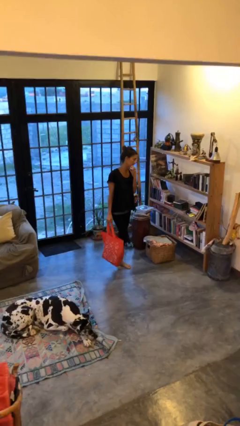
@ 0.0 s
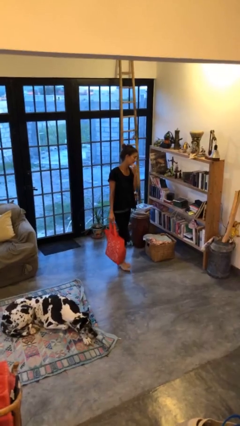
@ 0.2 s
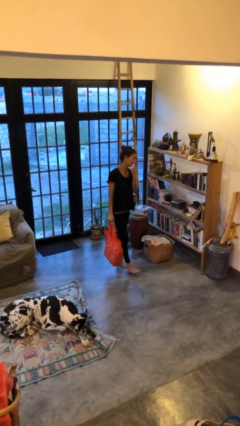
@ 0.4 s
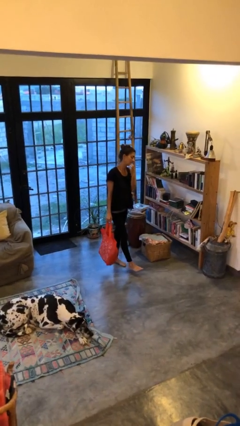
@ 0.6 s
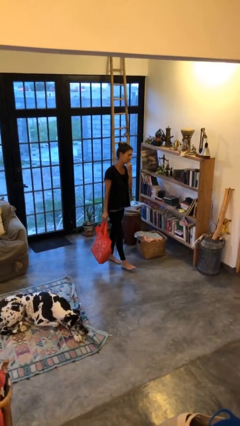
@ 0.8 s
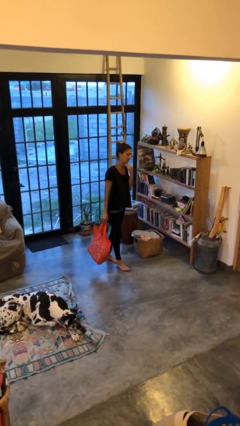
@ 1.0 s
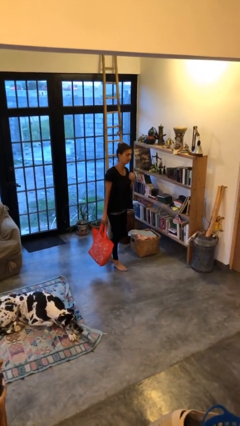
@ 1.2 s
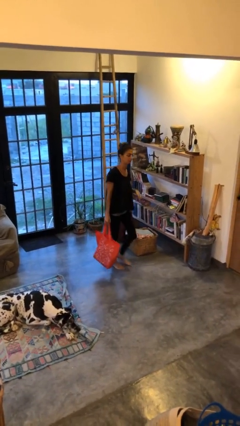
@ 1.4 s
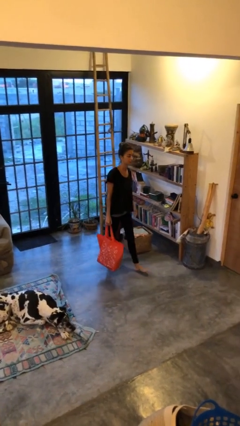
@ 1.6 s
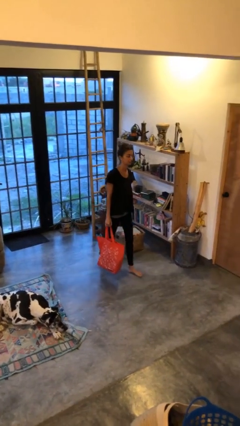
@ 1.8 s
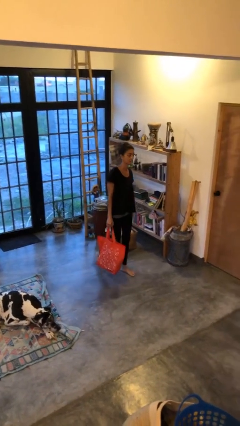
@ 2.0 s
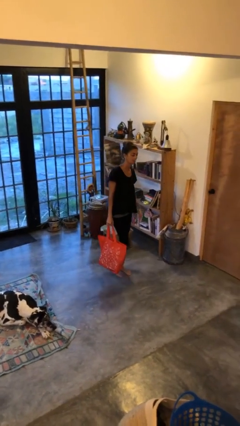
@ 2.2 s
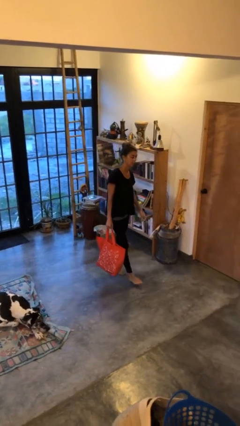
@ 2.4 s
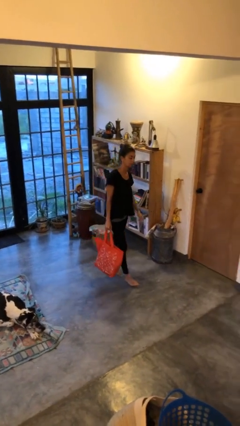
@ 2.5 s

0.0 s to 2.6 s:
person carries groceries

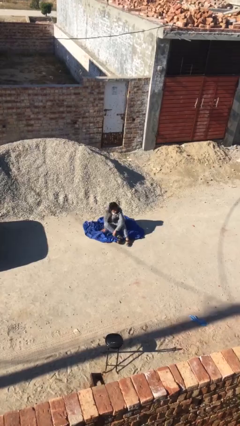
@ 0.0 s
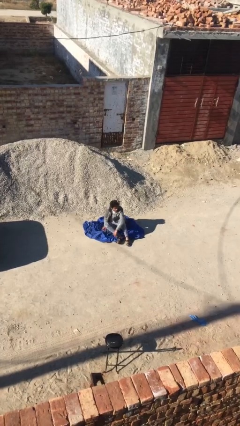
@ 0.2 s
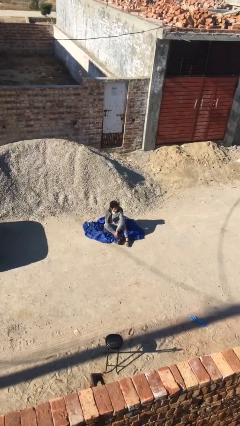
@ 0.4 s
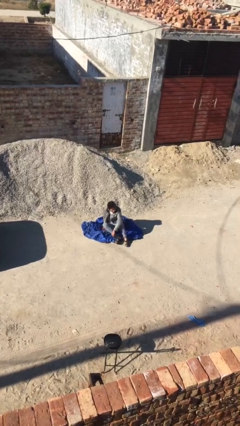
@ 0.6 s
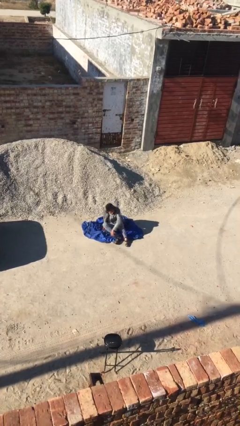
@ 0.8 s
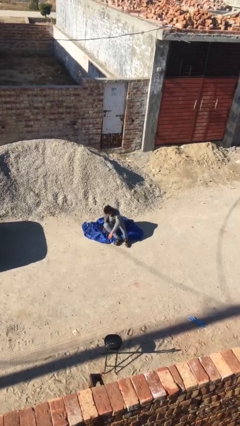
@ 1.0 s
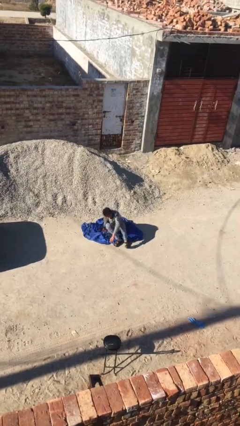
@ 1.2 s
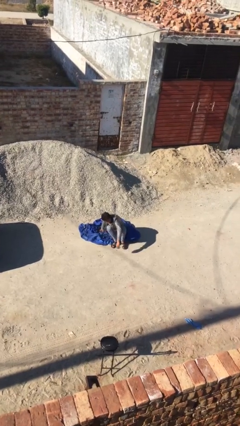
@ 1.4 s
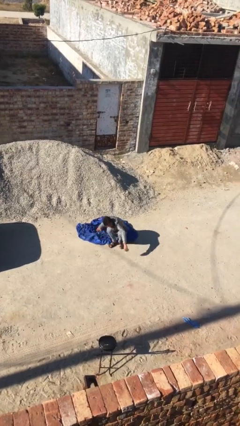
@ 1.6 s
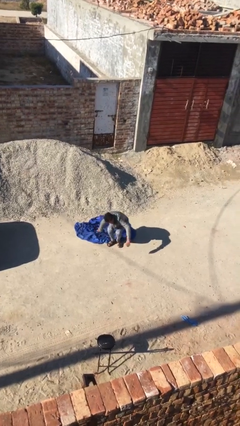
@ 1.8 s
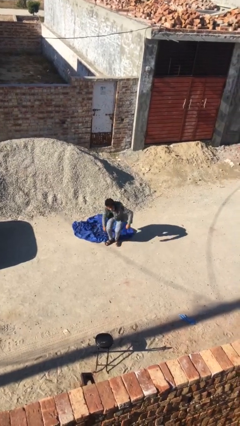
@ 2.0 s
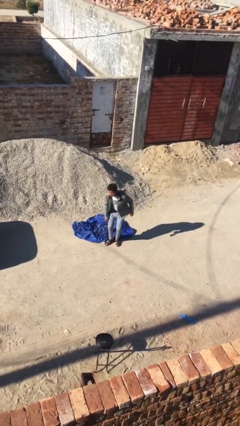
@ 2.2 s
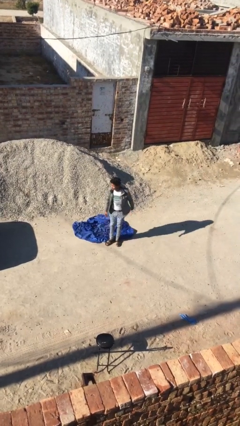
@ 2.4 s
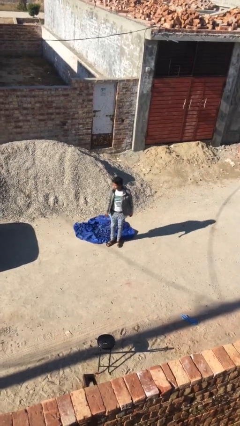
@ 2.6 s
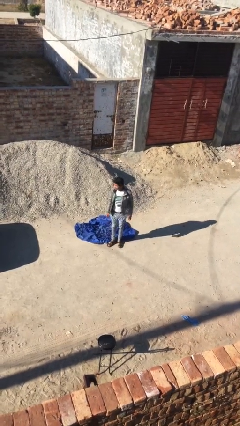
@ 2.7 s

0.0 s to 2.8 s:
person stands up

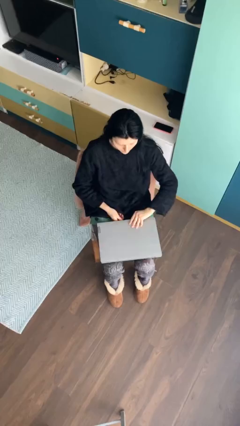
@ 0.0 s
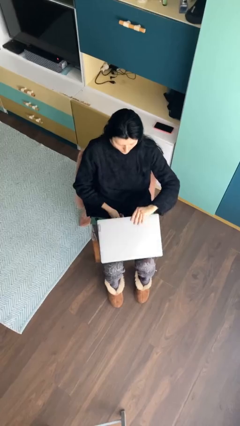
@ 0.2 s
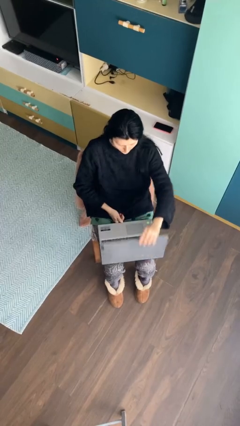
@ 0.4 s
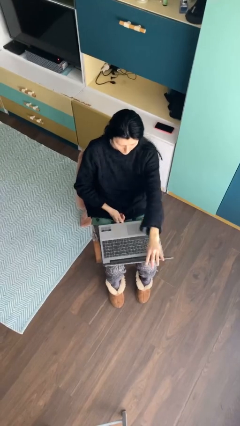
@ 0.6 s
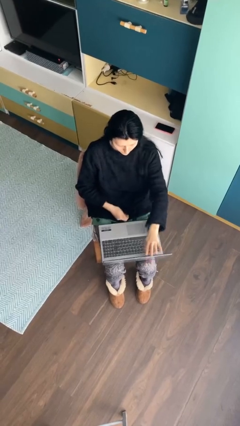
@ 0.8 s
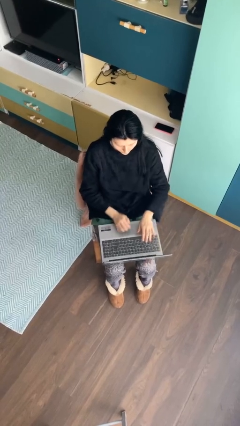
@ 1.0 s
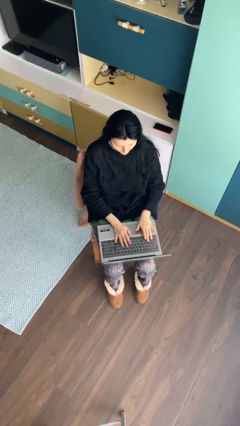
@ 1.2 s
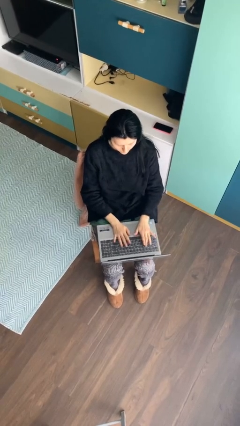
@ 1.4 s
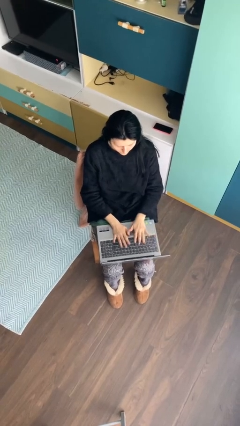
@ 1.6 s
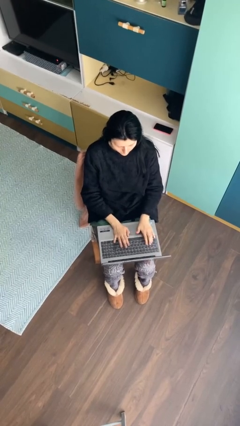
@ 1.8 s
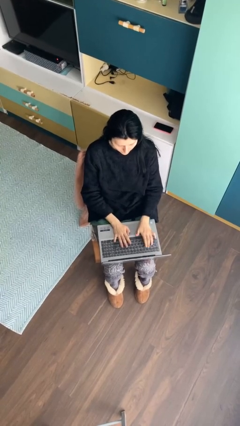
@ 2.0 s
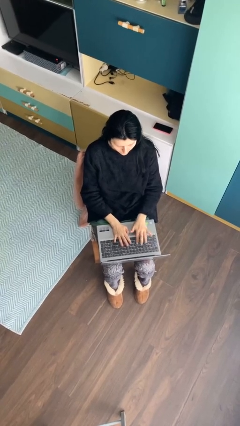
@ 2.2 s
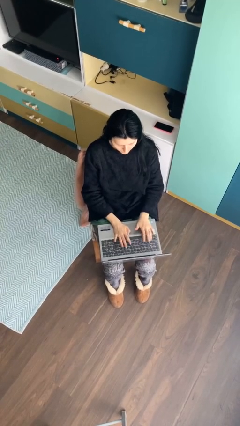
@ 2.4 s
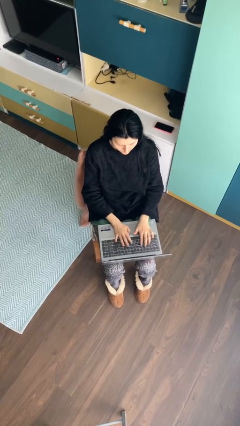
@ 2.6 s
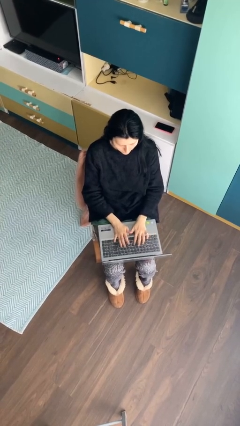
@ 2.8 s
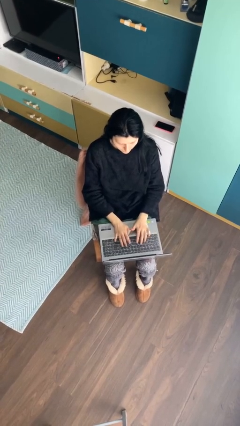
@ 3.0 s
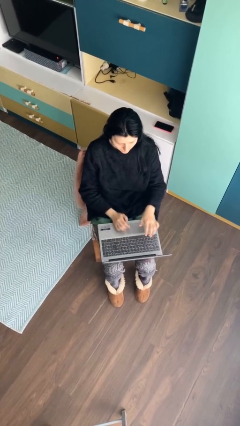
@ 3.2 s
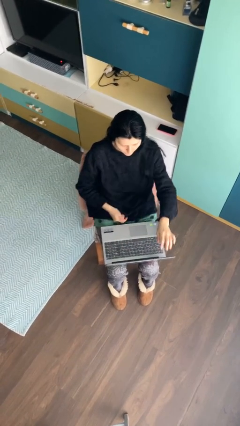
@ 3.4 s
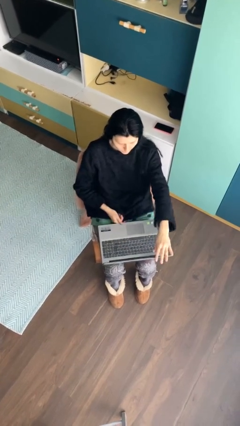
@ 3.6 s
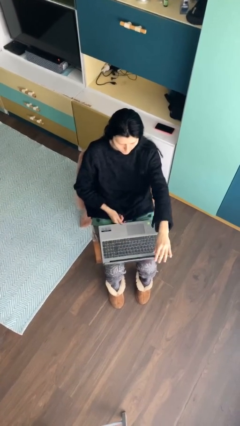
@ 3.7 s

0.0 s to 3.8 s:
person interacts with laptop

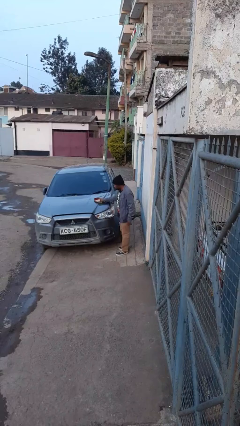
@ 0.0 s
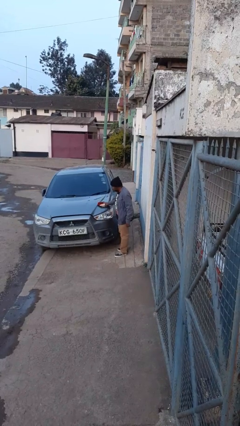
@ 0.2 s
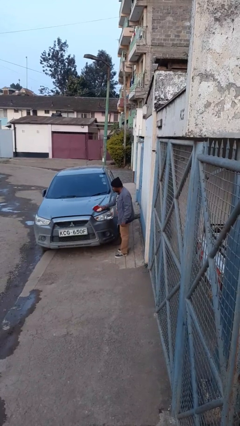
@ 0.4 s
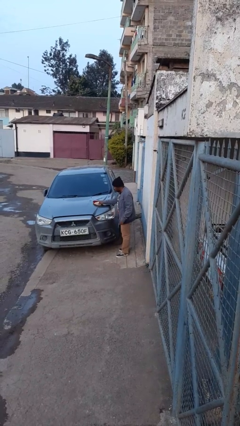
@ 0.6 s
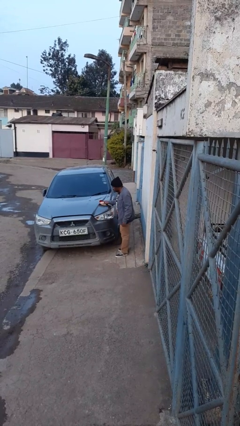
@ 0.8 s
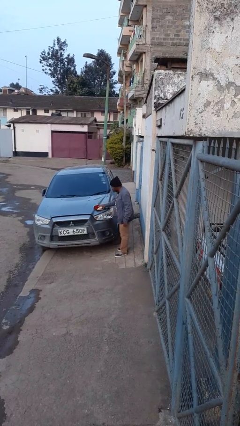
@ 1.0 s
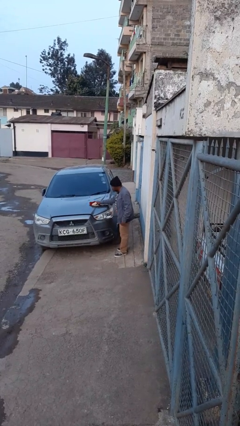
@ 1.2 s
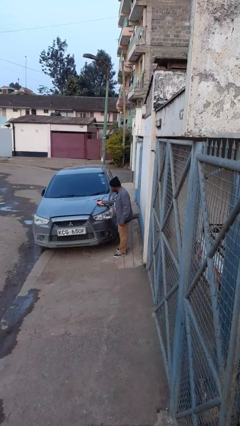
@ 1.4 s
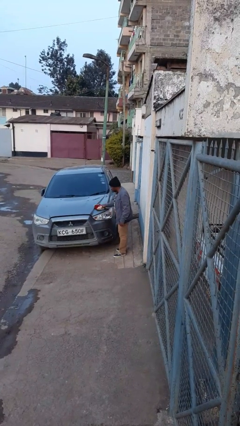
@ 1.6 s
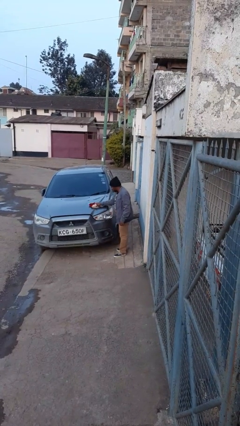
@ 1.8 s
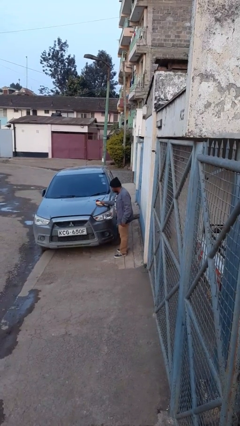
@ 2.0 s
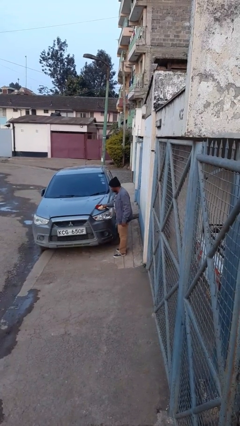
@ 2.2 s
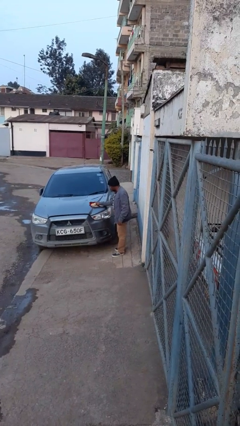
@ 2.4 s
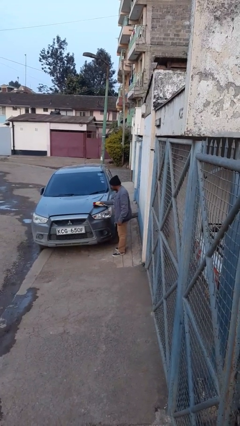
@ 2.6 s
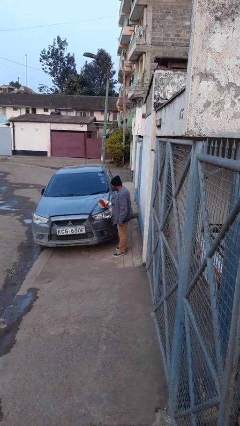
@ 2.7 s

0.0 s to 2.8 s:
person polishes car with rag

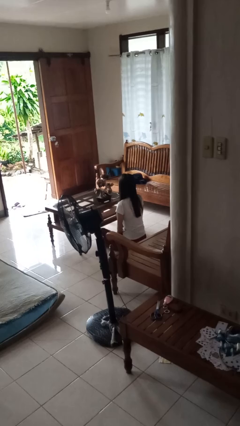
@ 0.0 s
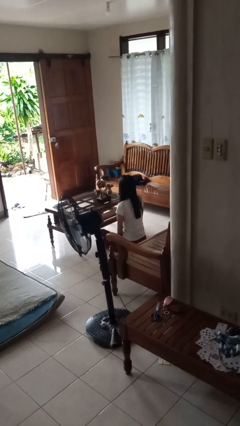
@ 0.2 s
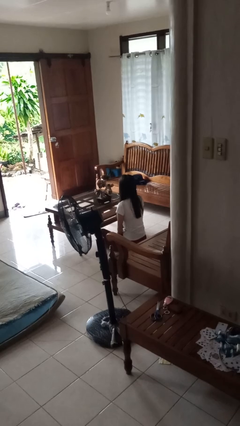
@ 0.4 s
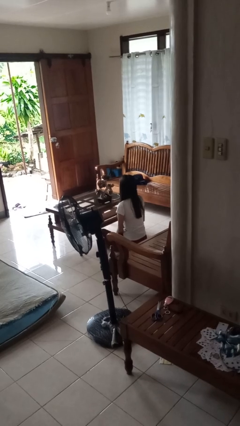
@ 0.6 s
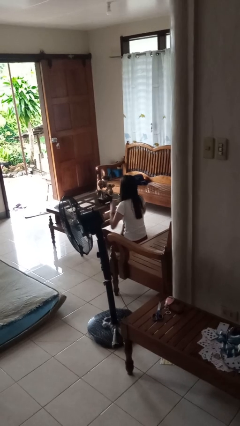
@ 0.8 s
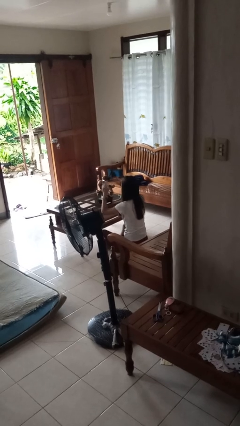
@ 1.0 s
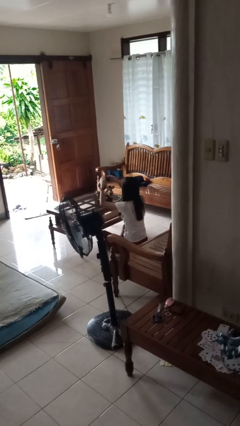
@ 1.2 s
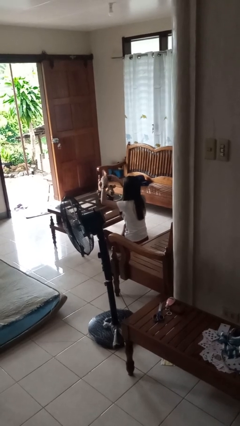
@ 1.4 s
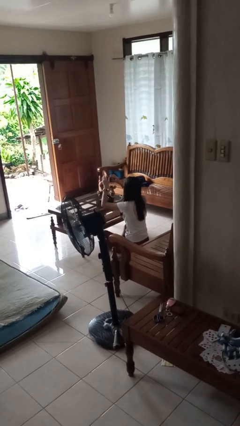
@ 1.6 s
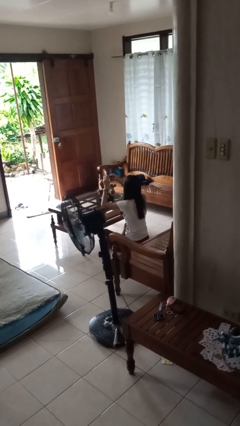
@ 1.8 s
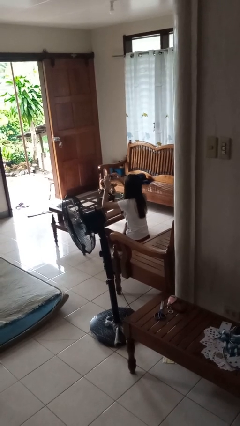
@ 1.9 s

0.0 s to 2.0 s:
person arranges flowers in vase

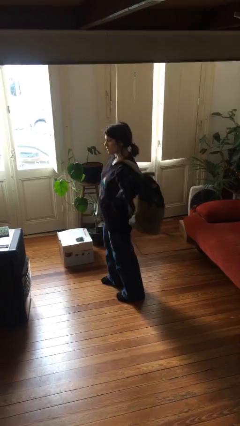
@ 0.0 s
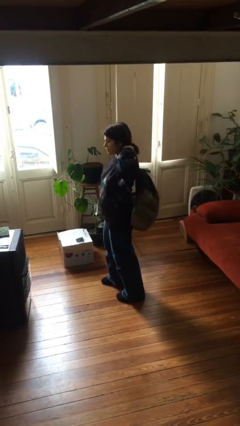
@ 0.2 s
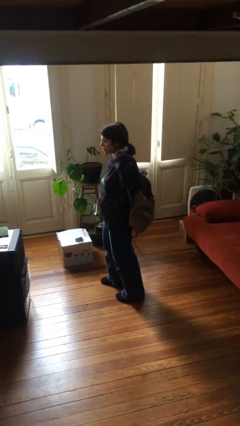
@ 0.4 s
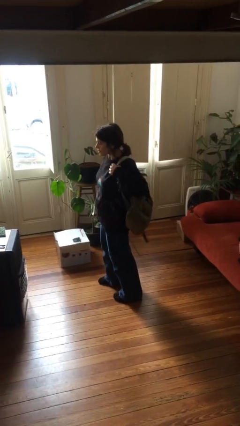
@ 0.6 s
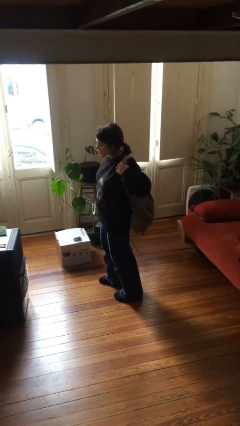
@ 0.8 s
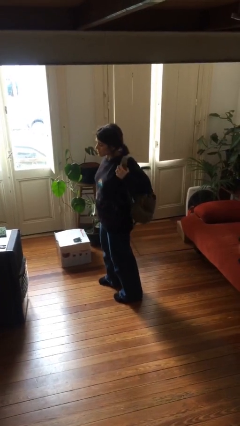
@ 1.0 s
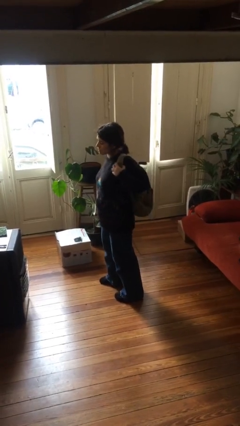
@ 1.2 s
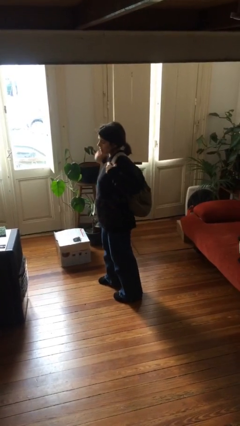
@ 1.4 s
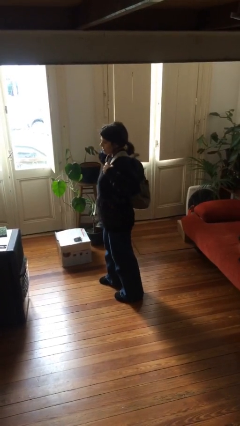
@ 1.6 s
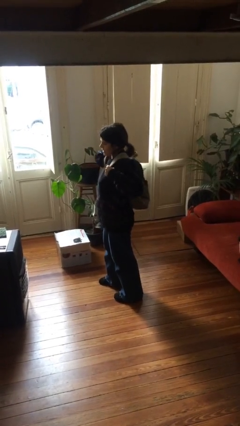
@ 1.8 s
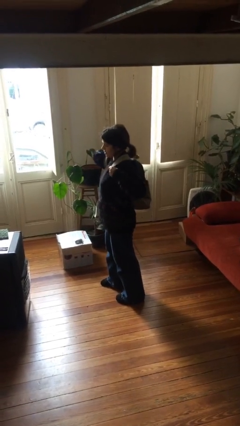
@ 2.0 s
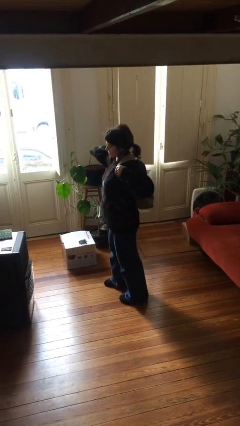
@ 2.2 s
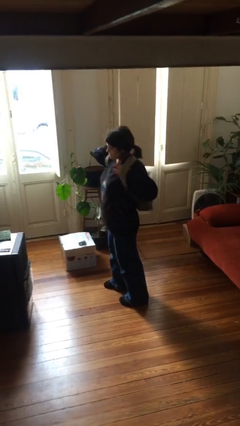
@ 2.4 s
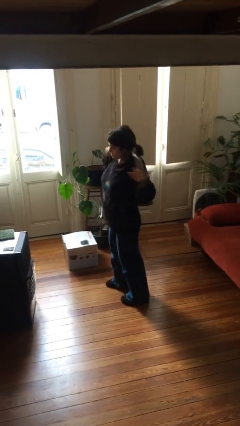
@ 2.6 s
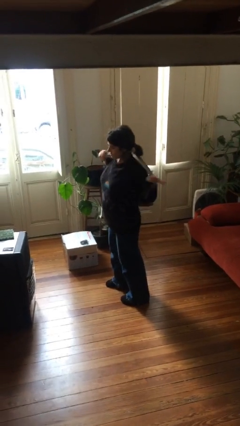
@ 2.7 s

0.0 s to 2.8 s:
person puts on backpack
